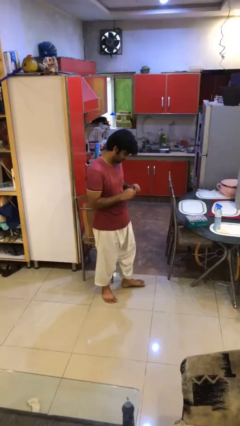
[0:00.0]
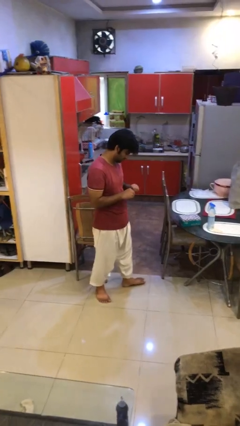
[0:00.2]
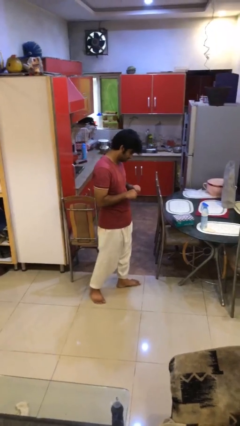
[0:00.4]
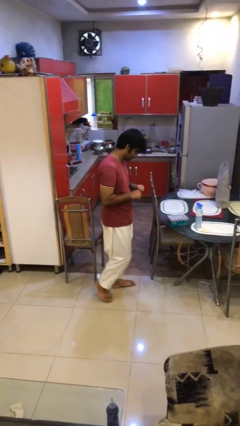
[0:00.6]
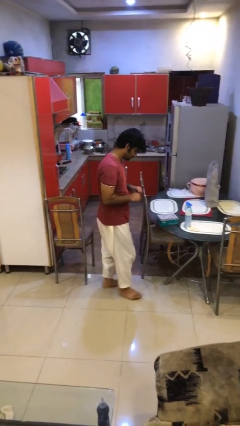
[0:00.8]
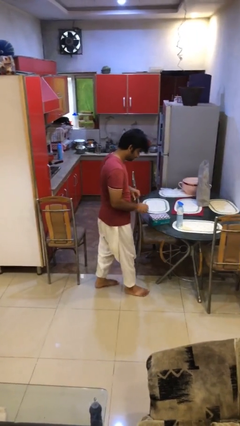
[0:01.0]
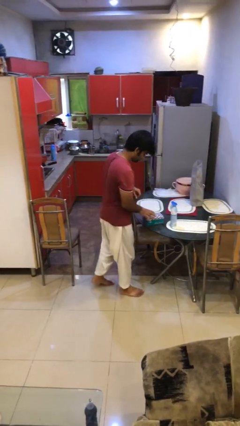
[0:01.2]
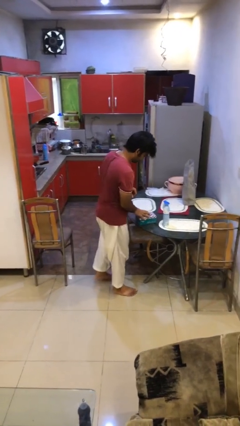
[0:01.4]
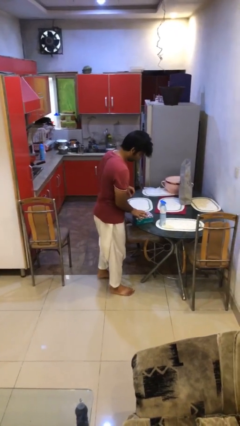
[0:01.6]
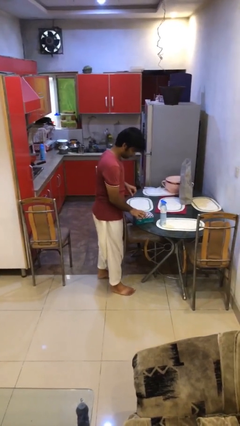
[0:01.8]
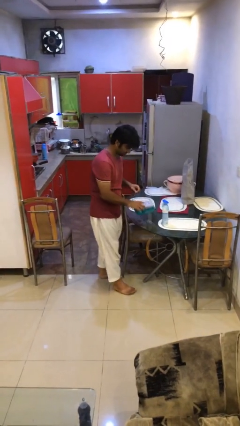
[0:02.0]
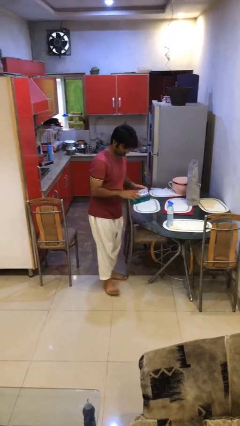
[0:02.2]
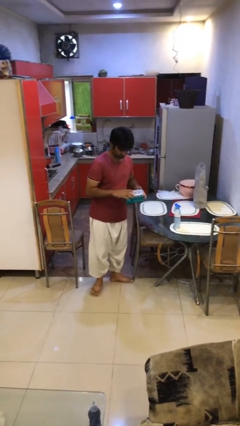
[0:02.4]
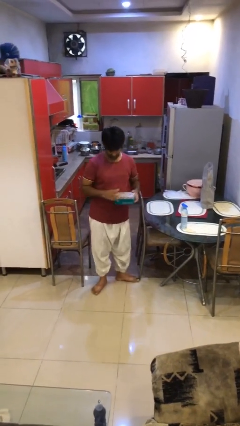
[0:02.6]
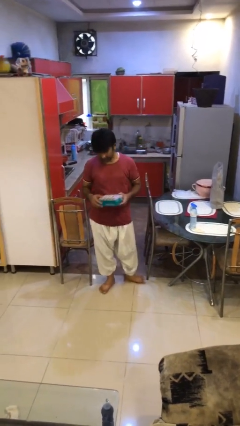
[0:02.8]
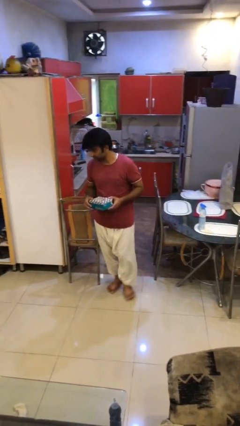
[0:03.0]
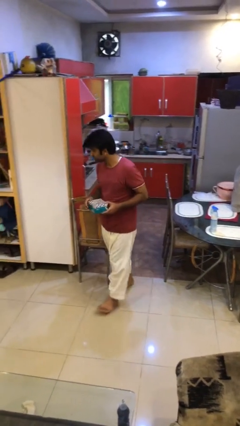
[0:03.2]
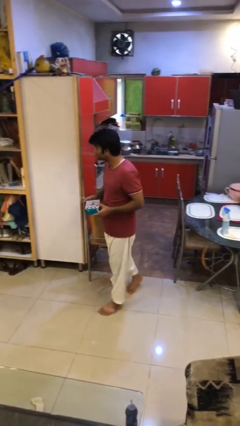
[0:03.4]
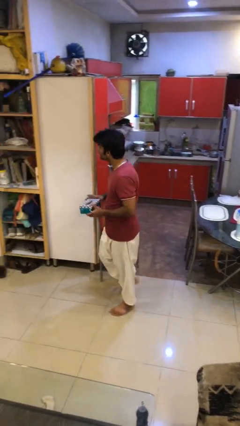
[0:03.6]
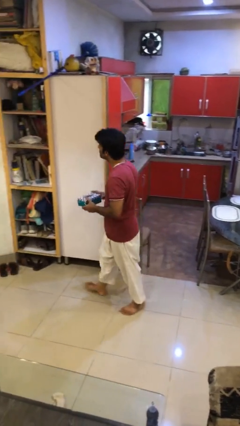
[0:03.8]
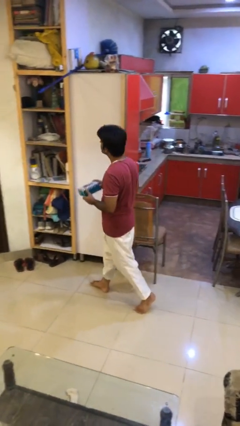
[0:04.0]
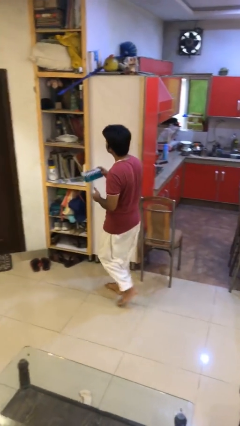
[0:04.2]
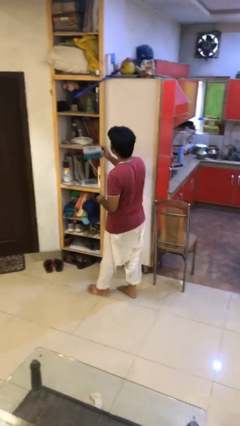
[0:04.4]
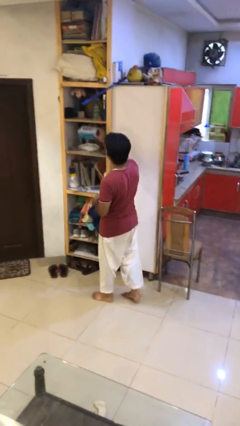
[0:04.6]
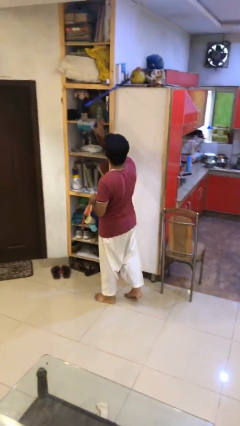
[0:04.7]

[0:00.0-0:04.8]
person picks up object from table

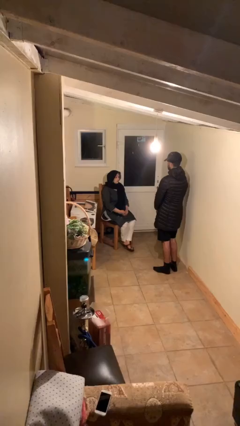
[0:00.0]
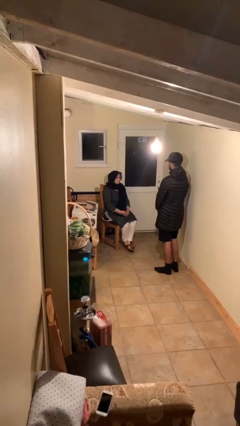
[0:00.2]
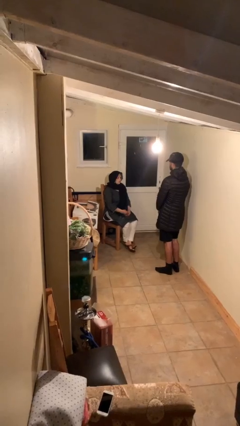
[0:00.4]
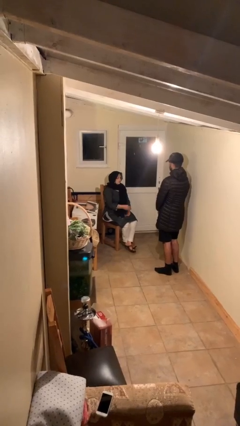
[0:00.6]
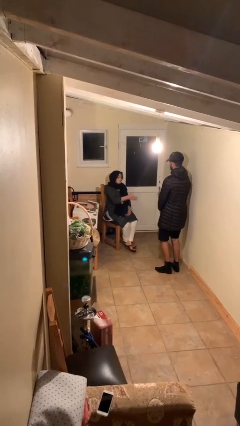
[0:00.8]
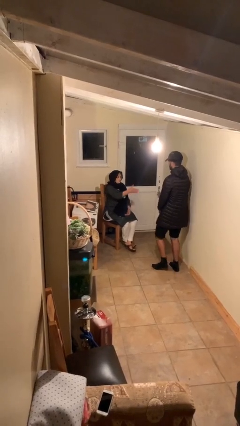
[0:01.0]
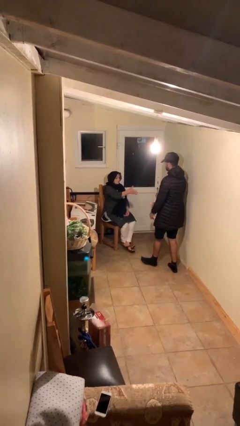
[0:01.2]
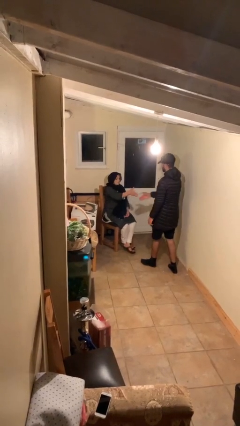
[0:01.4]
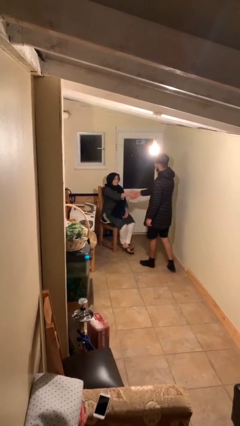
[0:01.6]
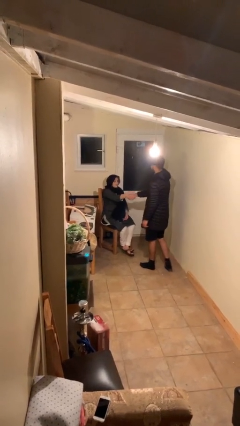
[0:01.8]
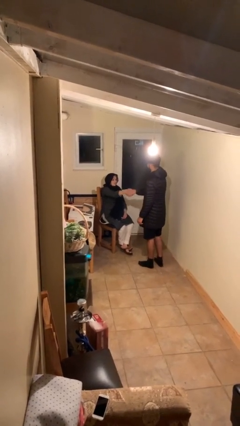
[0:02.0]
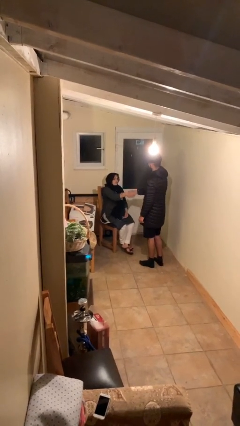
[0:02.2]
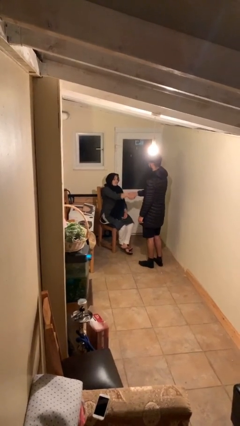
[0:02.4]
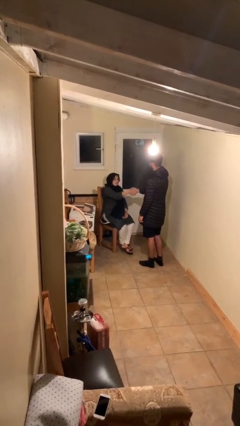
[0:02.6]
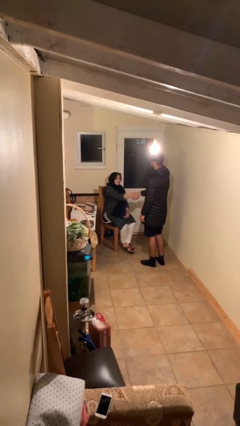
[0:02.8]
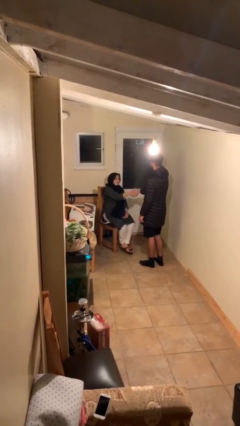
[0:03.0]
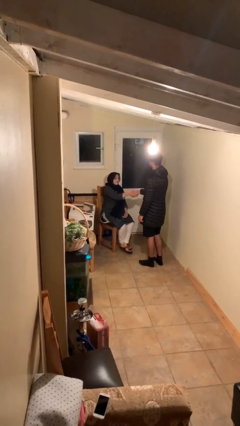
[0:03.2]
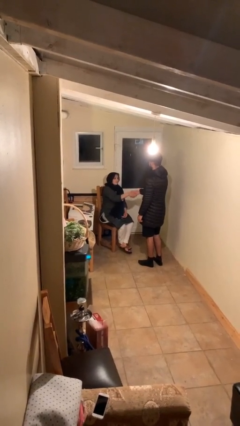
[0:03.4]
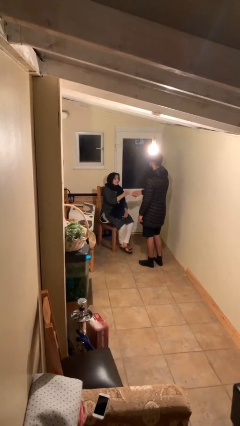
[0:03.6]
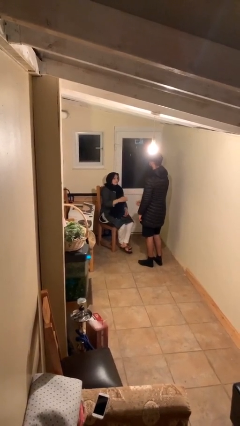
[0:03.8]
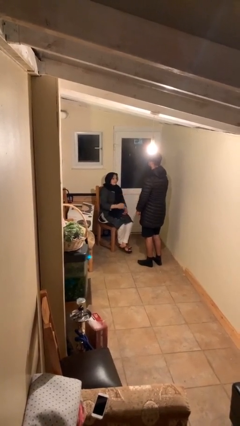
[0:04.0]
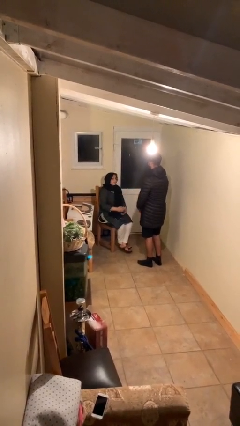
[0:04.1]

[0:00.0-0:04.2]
person shakes hand

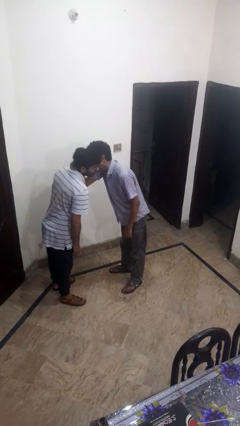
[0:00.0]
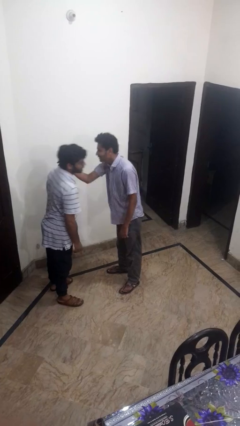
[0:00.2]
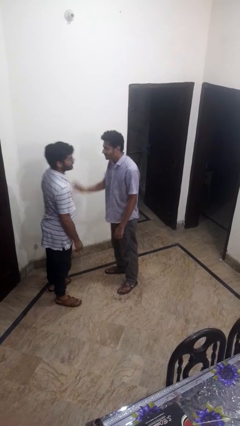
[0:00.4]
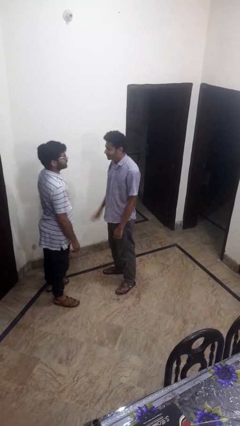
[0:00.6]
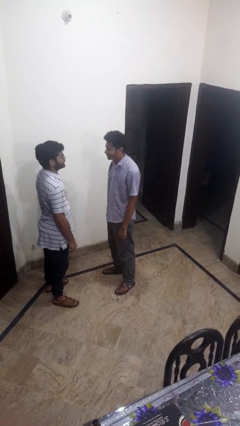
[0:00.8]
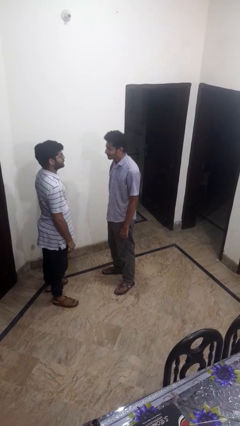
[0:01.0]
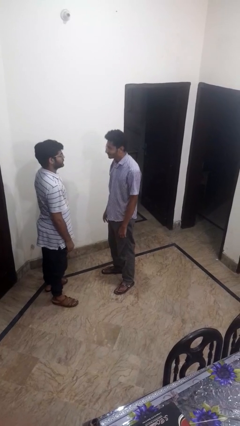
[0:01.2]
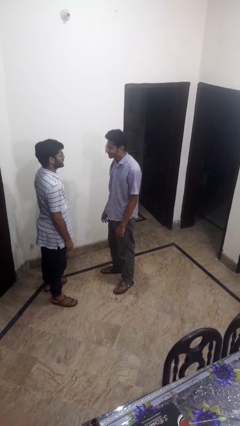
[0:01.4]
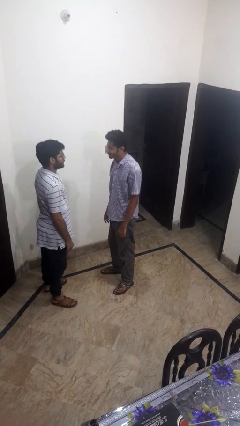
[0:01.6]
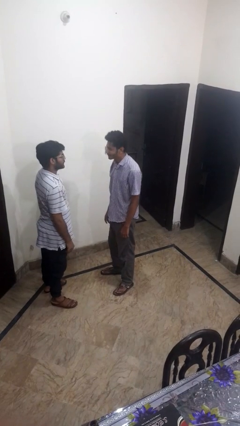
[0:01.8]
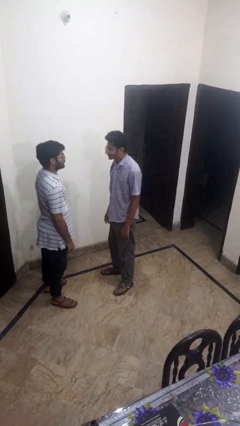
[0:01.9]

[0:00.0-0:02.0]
person grabs person by forearm

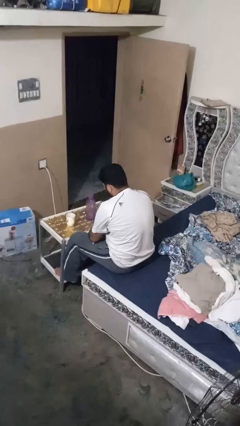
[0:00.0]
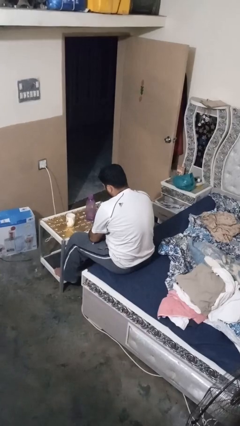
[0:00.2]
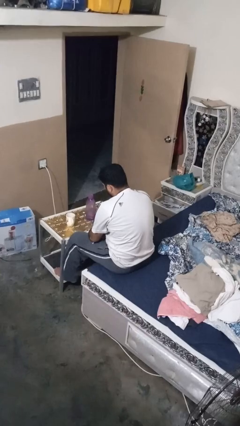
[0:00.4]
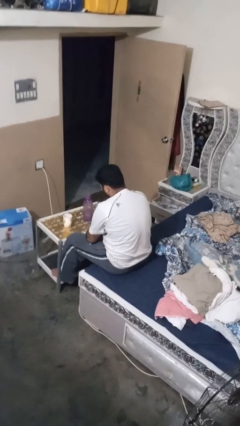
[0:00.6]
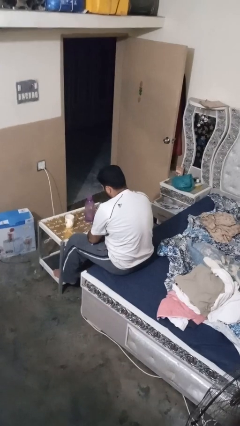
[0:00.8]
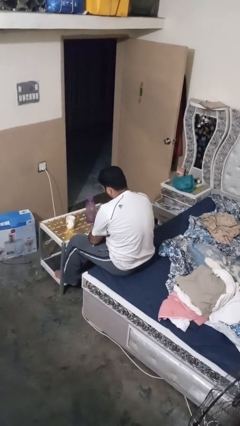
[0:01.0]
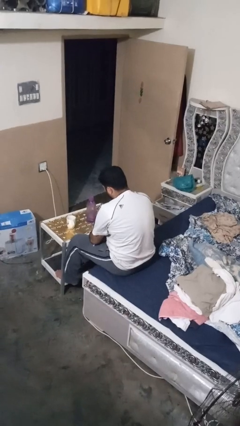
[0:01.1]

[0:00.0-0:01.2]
person unscrews lid from bottle

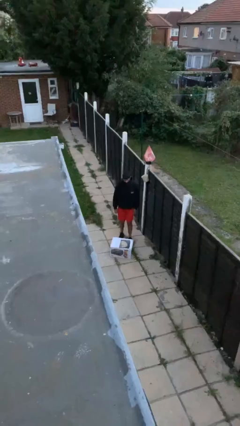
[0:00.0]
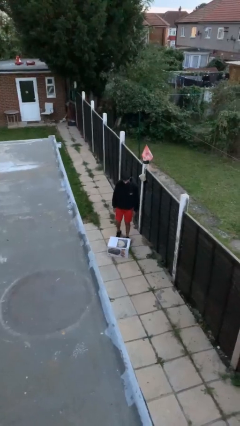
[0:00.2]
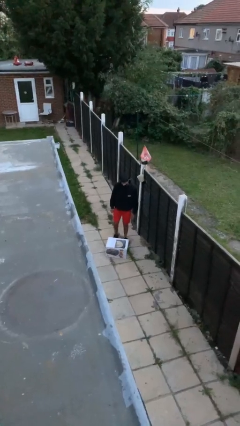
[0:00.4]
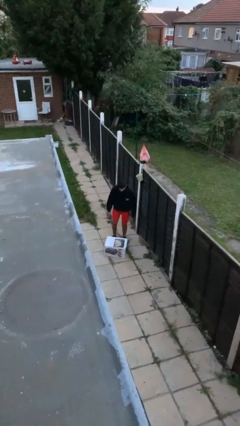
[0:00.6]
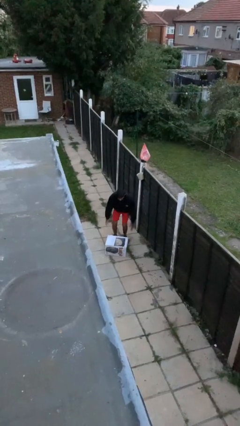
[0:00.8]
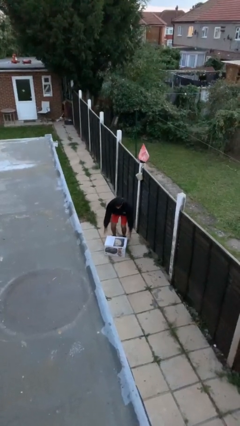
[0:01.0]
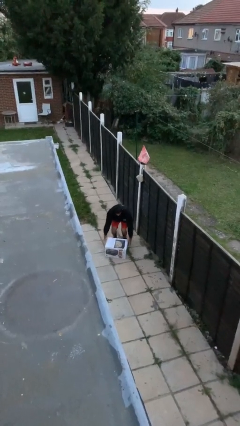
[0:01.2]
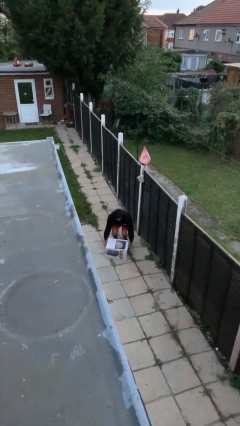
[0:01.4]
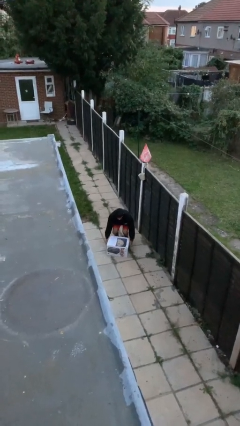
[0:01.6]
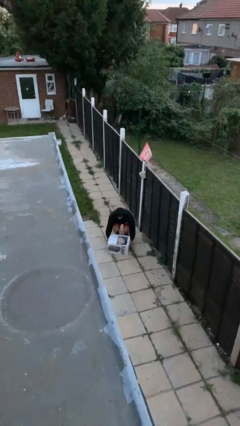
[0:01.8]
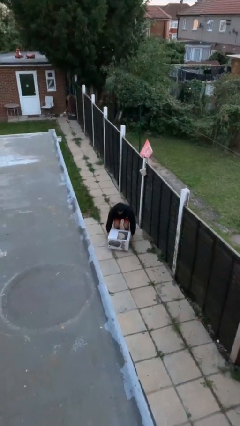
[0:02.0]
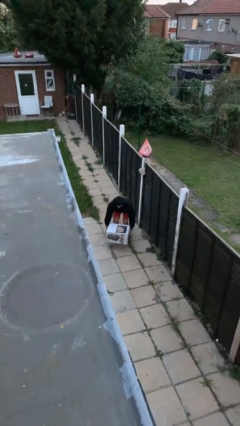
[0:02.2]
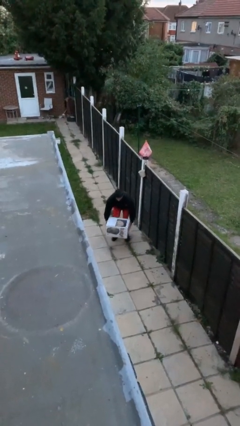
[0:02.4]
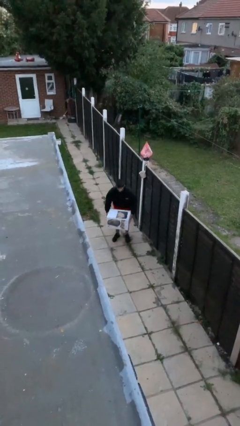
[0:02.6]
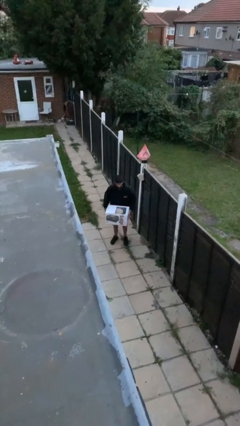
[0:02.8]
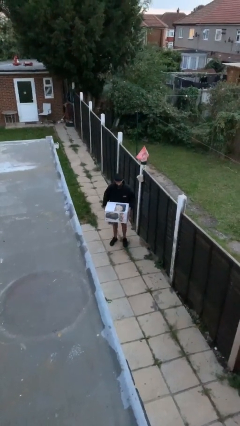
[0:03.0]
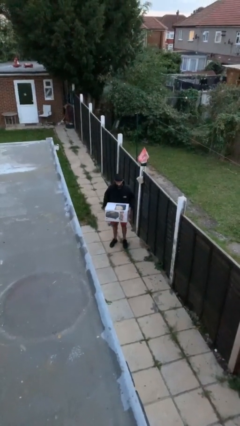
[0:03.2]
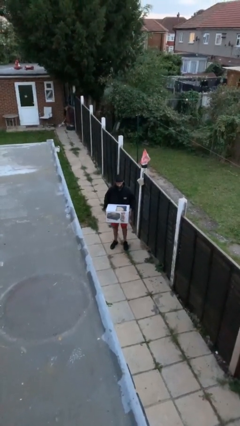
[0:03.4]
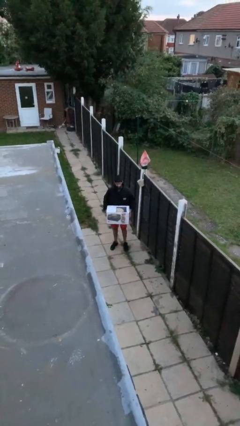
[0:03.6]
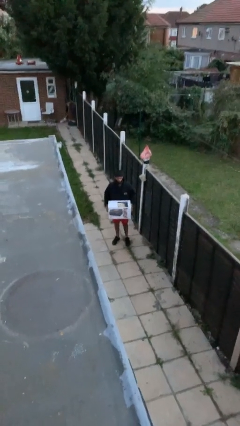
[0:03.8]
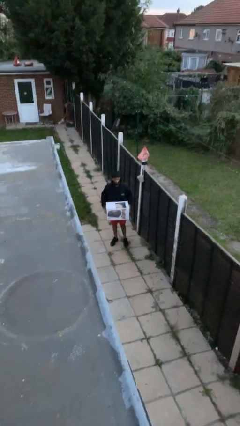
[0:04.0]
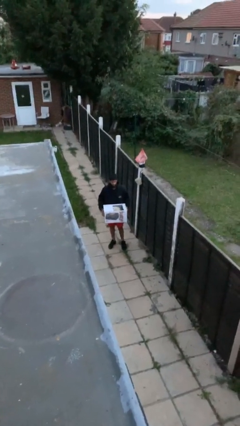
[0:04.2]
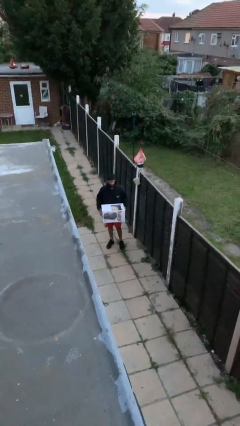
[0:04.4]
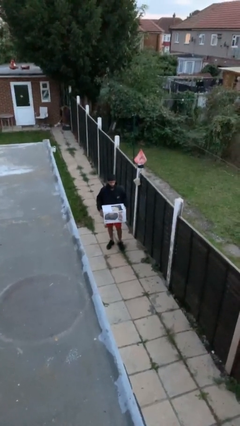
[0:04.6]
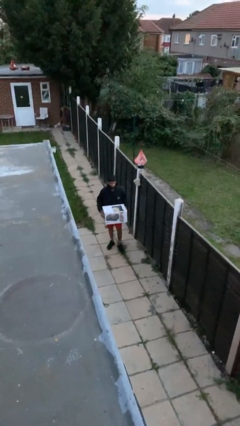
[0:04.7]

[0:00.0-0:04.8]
person picks up object from floor

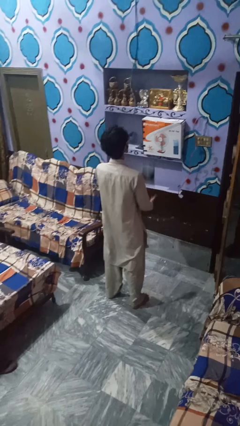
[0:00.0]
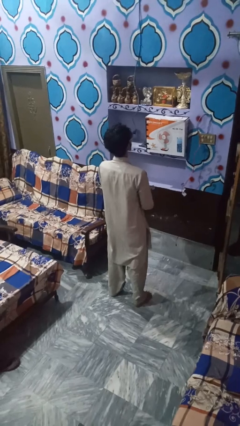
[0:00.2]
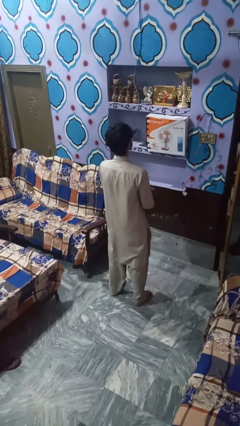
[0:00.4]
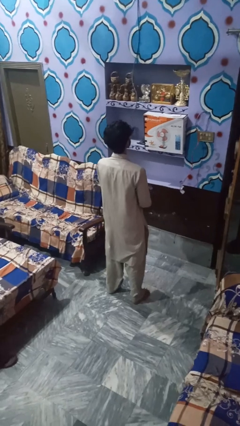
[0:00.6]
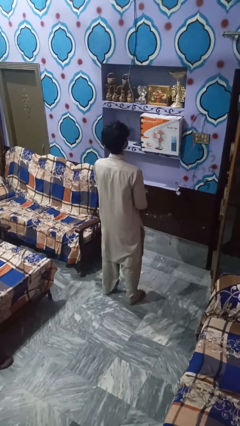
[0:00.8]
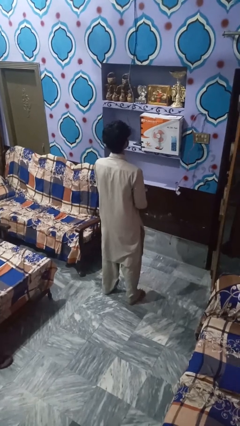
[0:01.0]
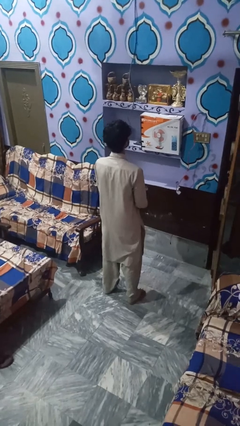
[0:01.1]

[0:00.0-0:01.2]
person catches dropped object
